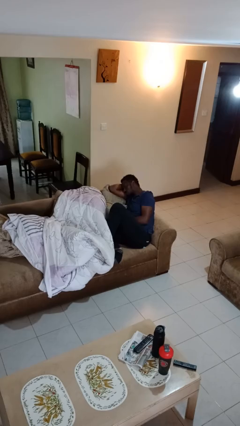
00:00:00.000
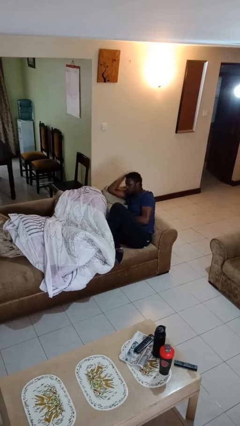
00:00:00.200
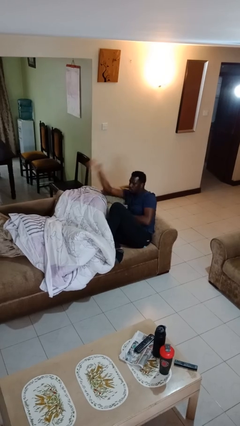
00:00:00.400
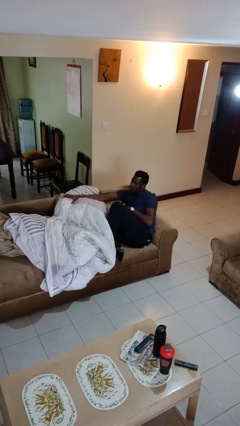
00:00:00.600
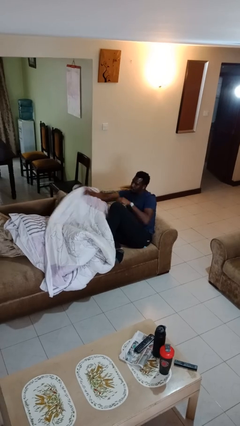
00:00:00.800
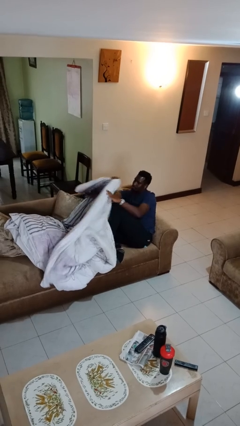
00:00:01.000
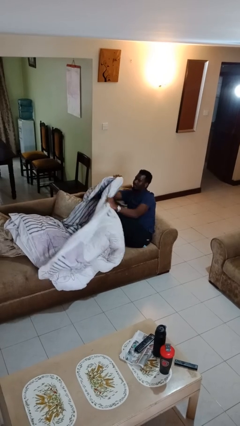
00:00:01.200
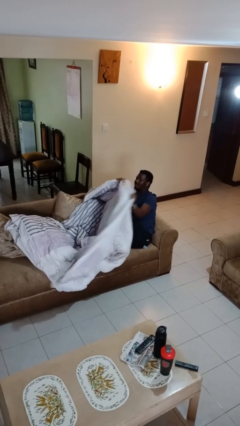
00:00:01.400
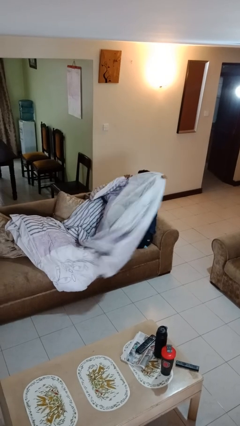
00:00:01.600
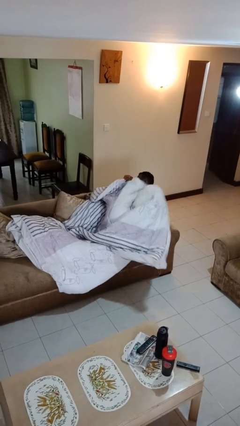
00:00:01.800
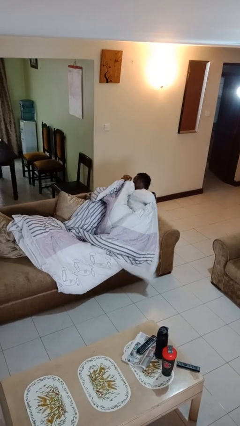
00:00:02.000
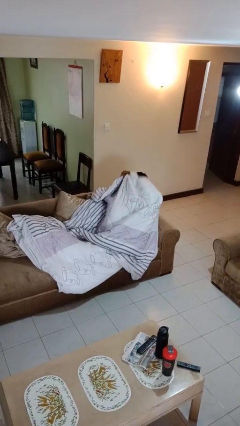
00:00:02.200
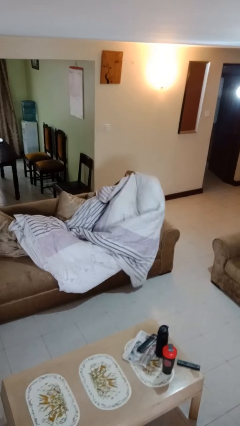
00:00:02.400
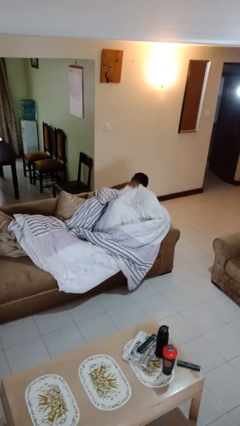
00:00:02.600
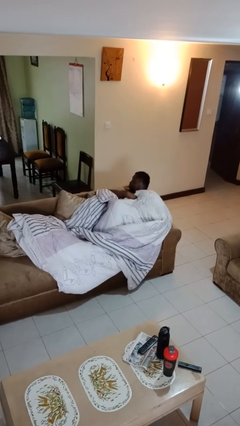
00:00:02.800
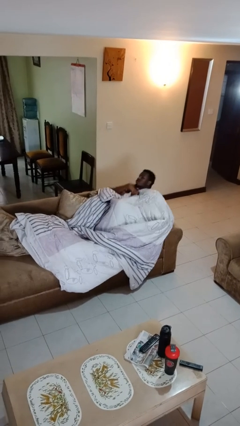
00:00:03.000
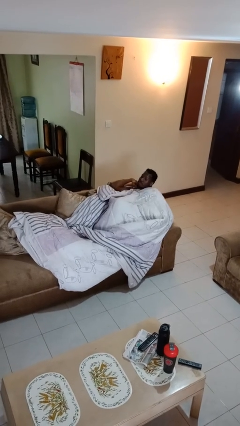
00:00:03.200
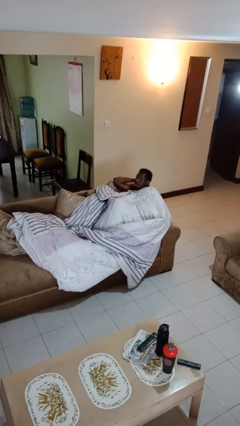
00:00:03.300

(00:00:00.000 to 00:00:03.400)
person covers with blanket

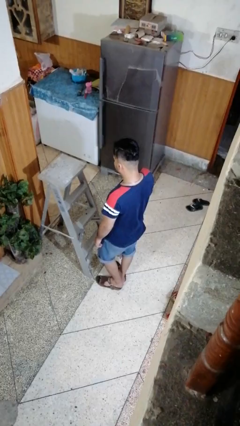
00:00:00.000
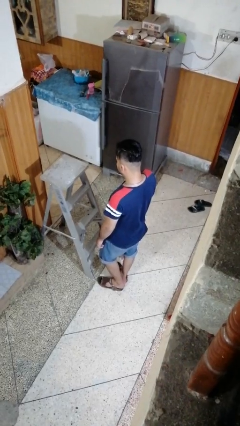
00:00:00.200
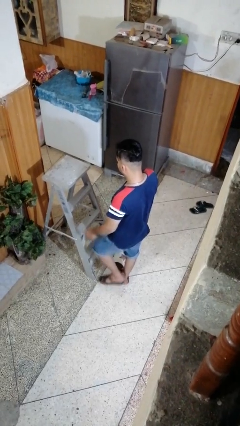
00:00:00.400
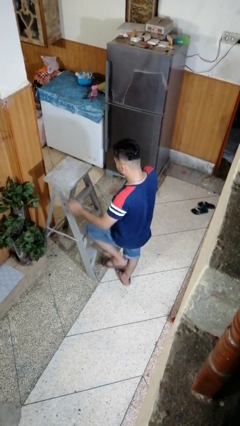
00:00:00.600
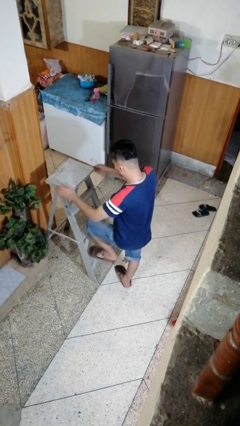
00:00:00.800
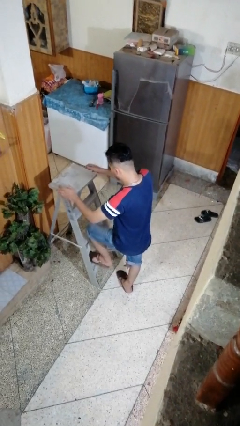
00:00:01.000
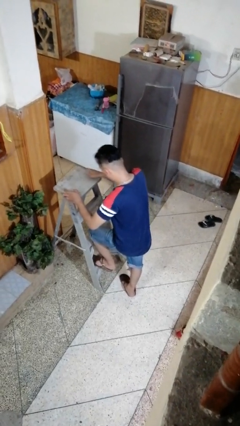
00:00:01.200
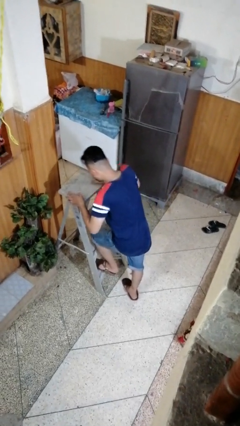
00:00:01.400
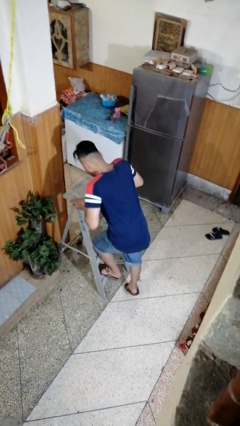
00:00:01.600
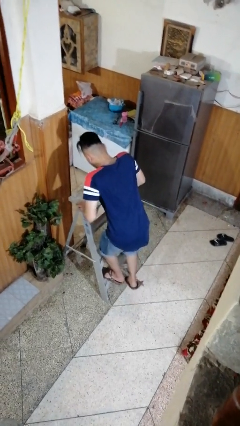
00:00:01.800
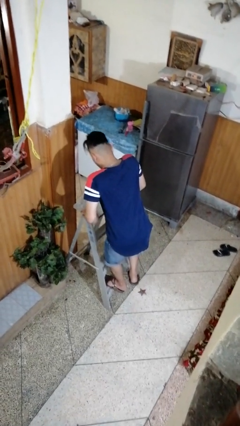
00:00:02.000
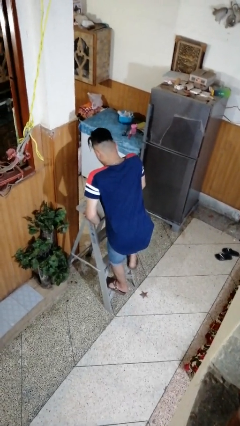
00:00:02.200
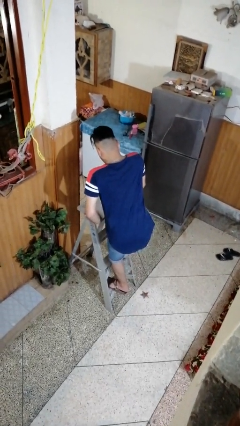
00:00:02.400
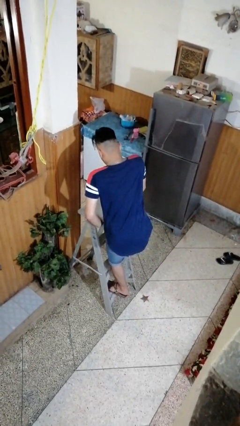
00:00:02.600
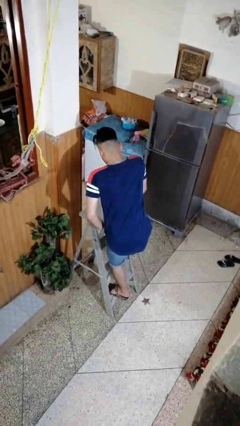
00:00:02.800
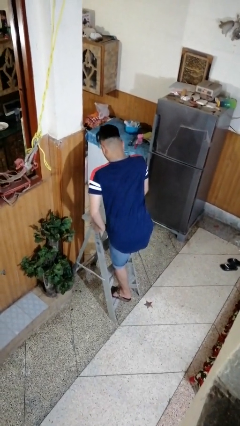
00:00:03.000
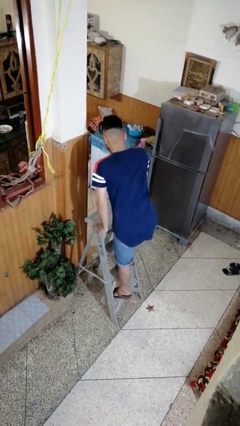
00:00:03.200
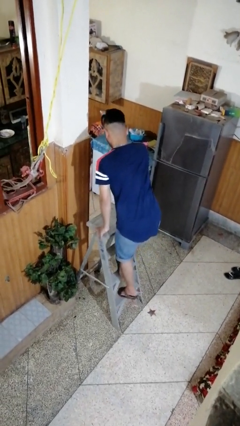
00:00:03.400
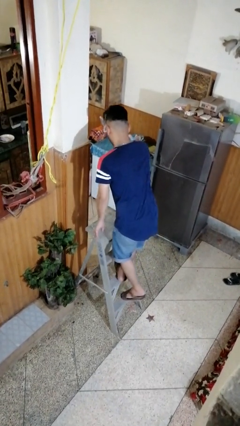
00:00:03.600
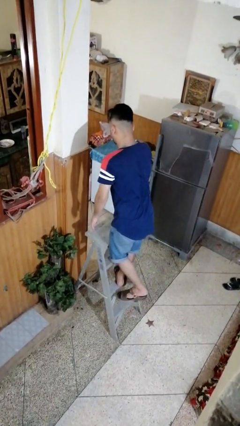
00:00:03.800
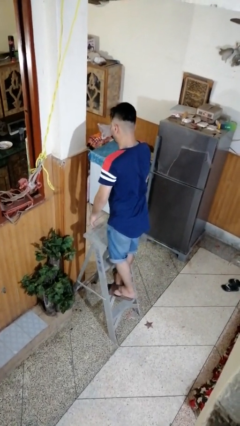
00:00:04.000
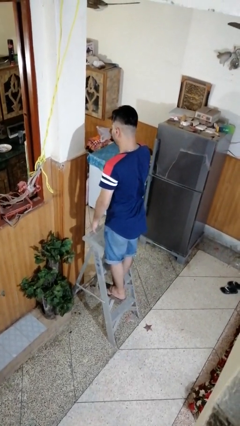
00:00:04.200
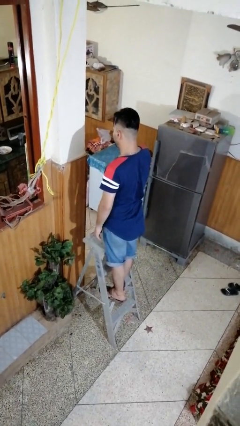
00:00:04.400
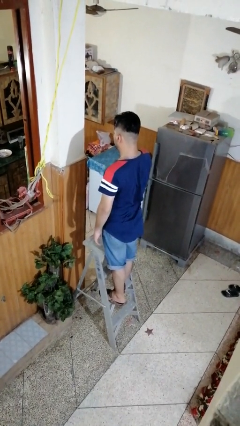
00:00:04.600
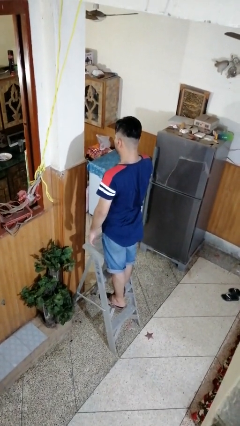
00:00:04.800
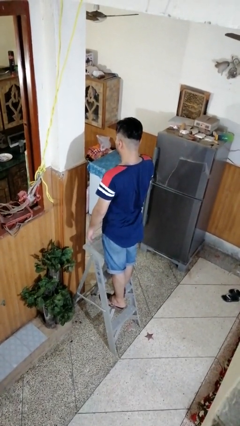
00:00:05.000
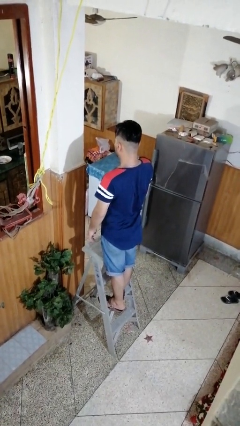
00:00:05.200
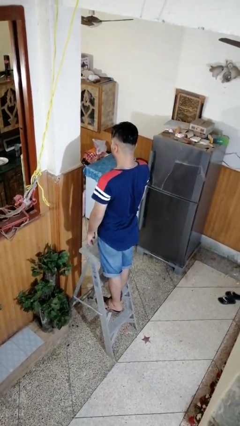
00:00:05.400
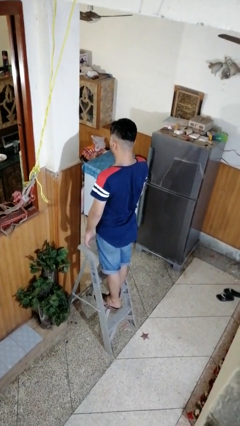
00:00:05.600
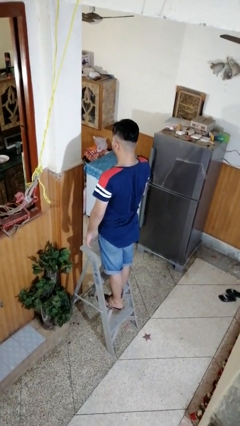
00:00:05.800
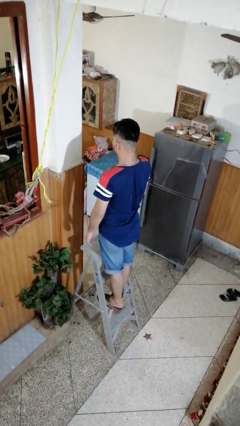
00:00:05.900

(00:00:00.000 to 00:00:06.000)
person climbs up ladder

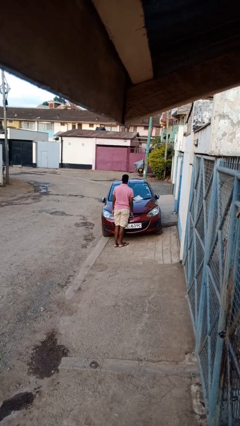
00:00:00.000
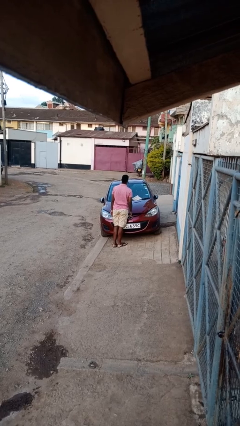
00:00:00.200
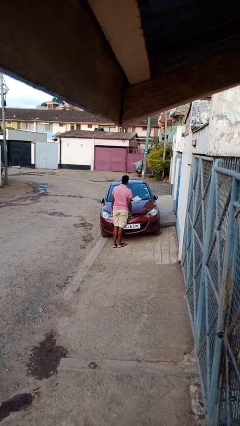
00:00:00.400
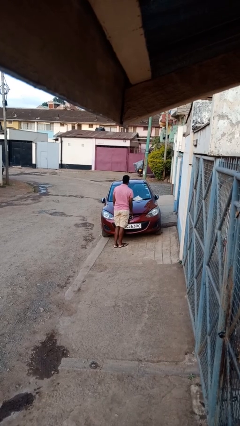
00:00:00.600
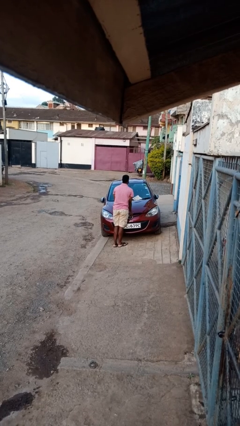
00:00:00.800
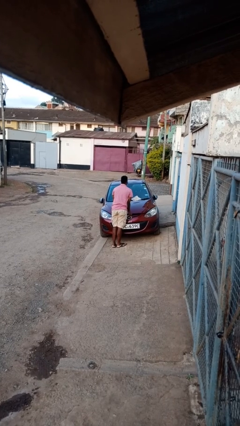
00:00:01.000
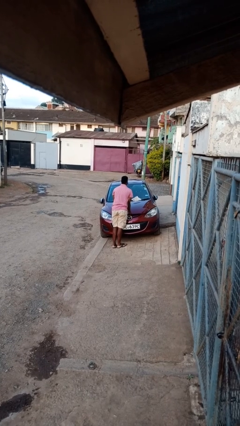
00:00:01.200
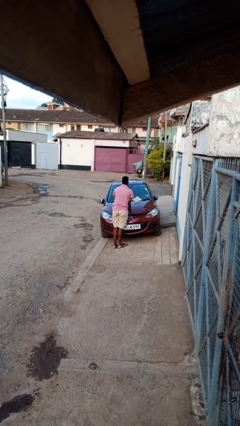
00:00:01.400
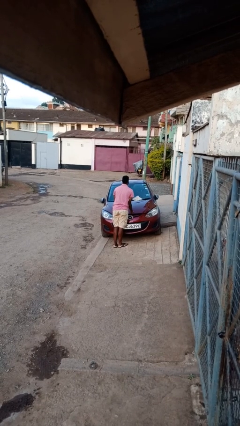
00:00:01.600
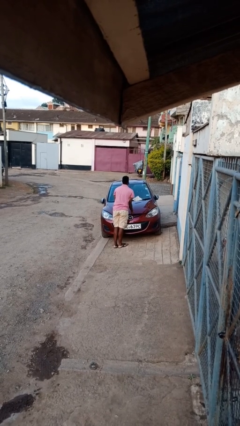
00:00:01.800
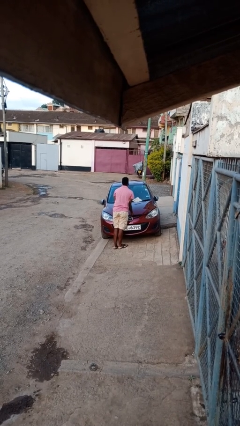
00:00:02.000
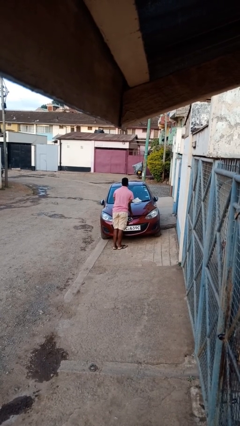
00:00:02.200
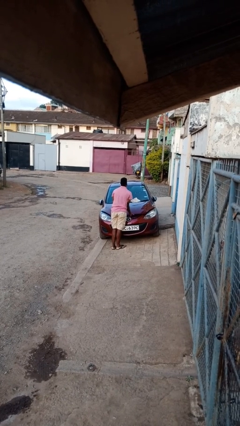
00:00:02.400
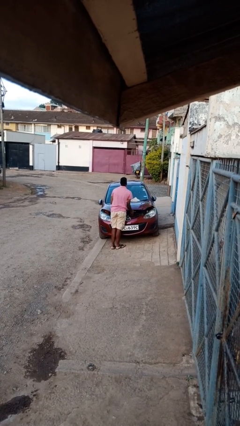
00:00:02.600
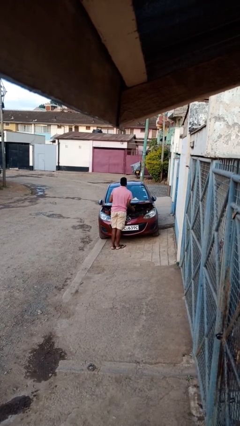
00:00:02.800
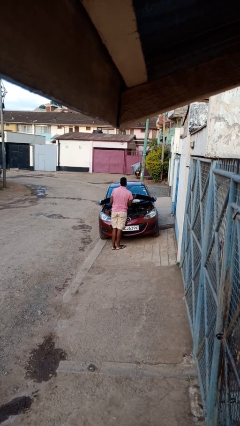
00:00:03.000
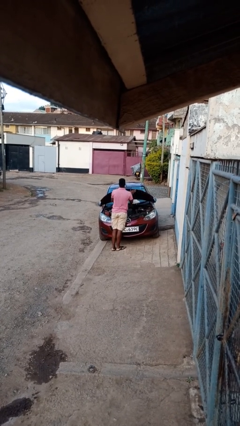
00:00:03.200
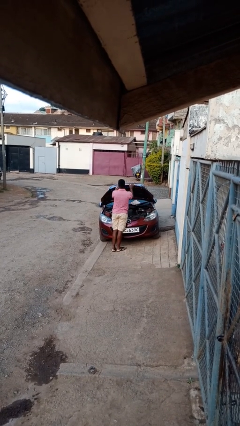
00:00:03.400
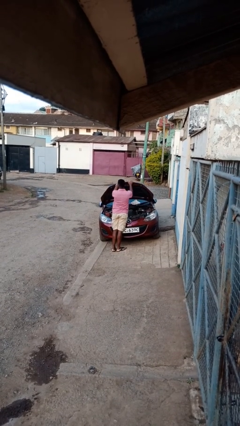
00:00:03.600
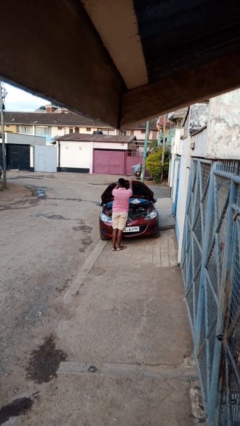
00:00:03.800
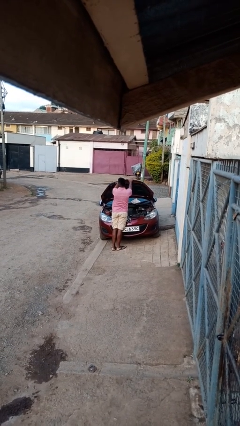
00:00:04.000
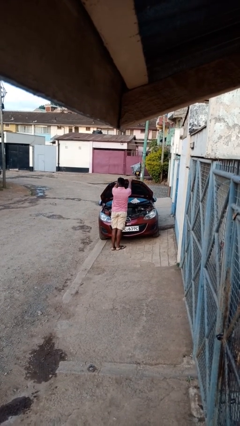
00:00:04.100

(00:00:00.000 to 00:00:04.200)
person opens car hood

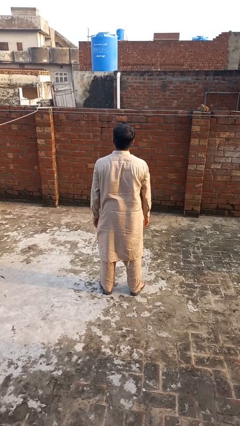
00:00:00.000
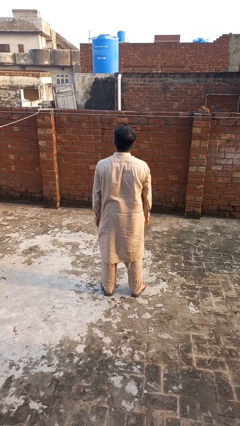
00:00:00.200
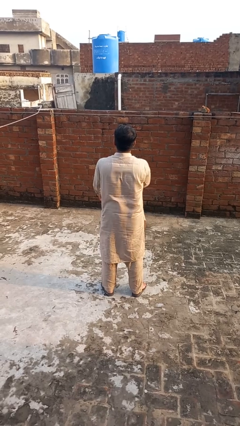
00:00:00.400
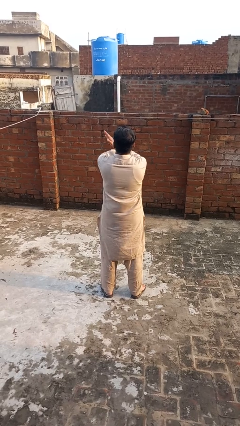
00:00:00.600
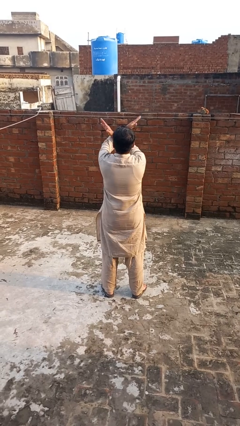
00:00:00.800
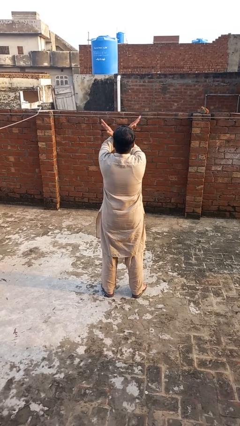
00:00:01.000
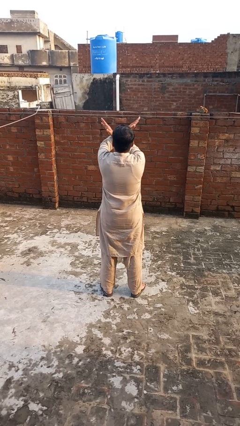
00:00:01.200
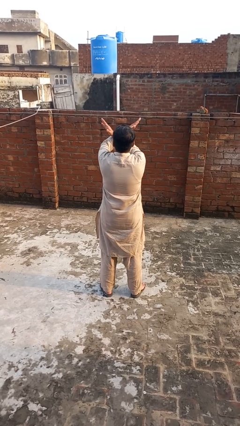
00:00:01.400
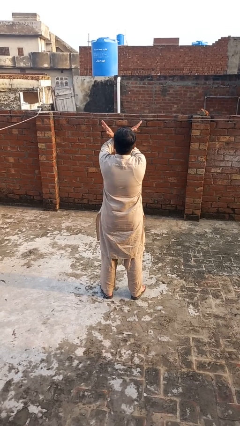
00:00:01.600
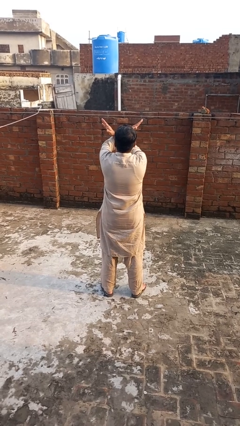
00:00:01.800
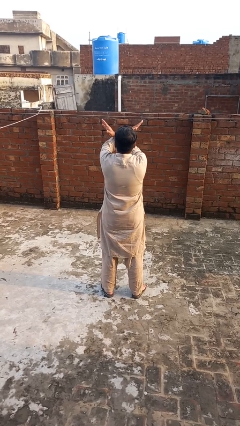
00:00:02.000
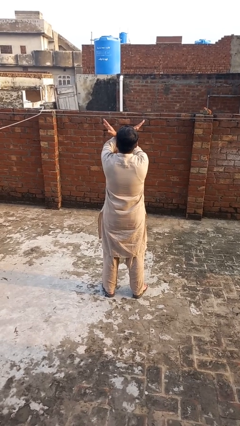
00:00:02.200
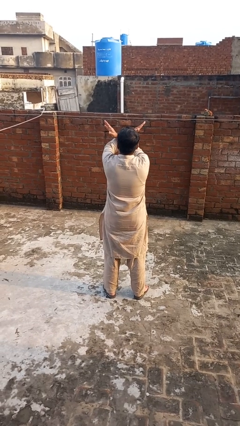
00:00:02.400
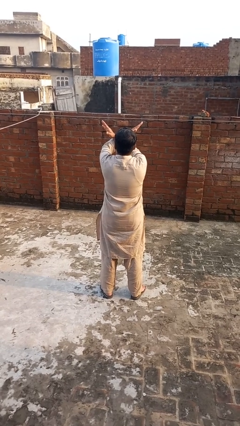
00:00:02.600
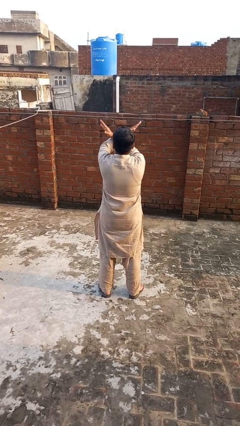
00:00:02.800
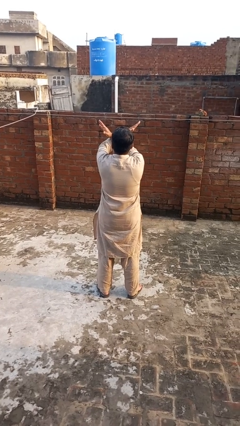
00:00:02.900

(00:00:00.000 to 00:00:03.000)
person gestures arms x

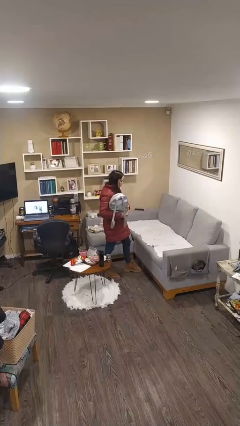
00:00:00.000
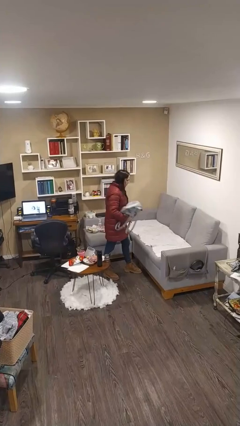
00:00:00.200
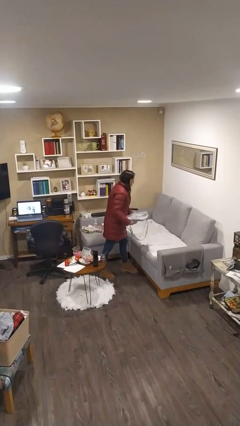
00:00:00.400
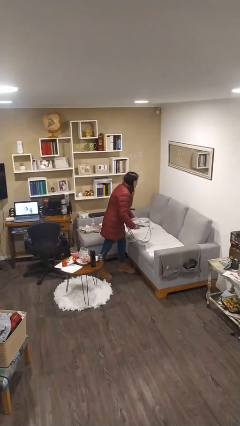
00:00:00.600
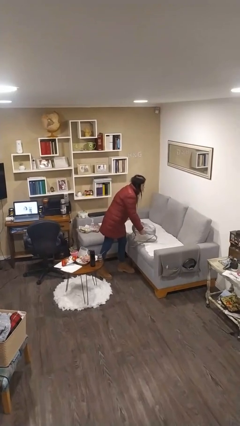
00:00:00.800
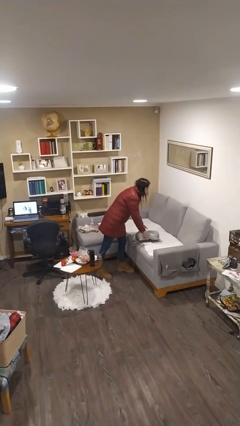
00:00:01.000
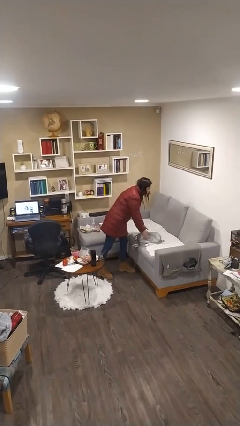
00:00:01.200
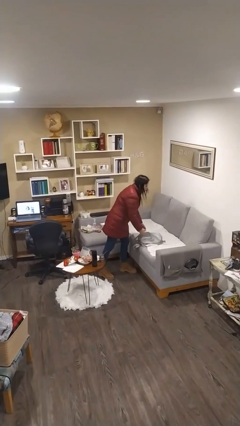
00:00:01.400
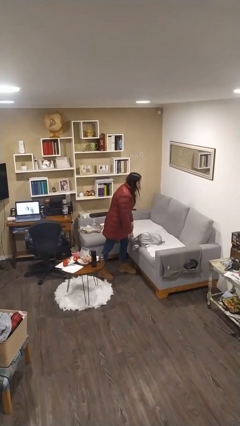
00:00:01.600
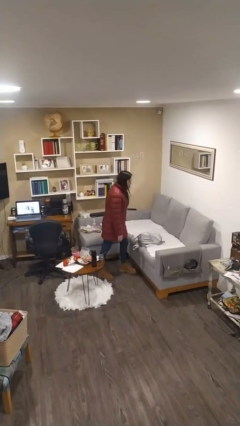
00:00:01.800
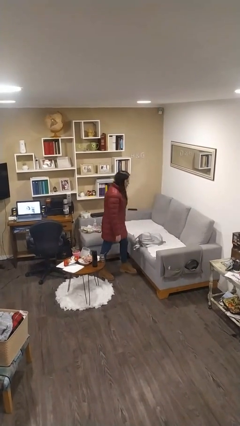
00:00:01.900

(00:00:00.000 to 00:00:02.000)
person puts down object on couch
